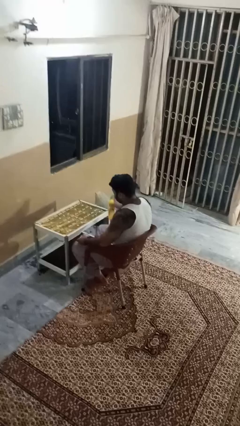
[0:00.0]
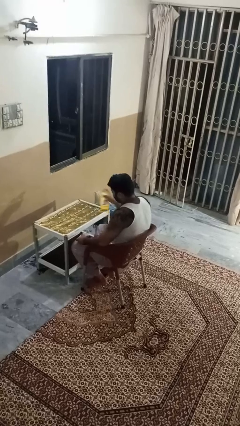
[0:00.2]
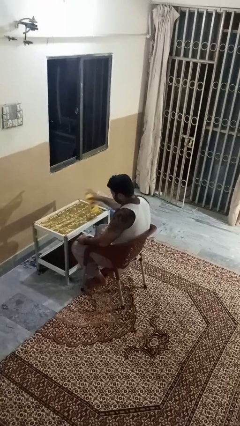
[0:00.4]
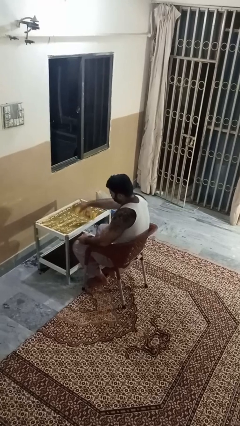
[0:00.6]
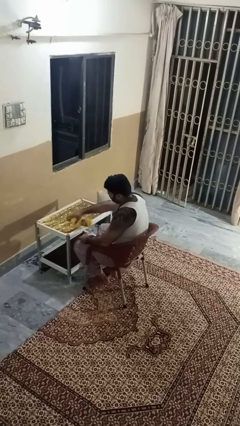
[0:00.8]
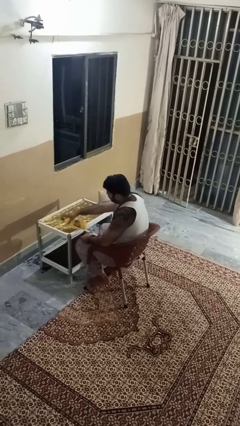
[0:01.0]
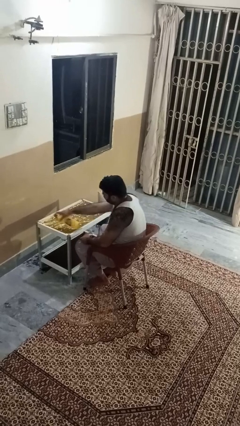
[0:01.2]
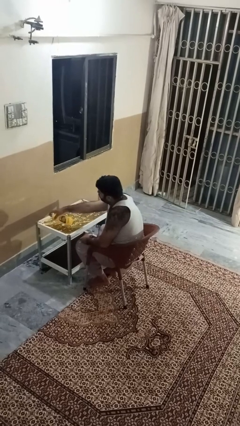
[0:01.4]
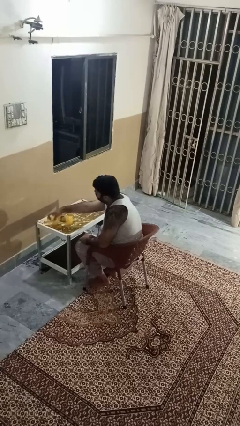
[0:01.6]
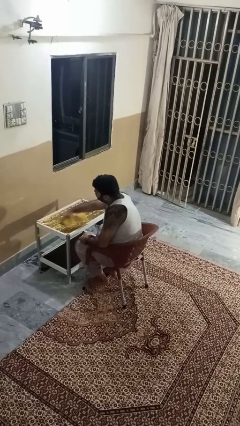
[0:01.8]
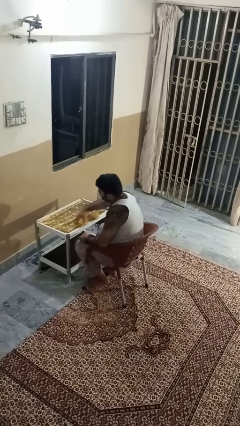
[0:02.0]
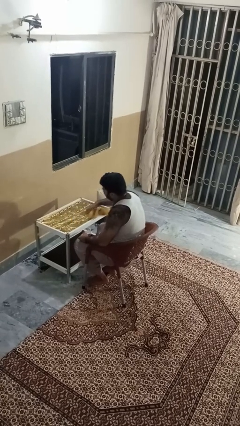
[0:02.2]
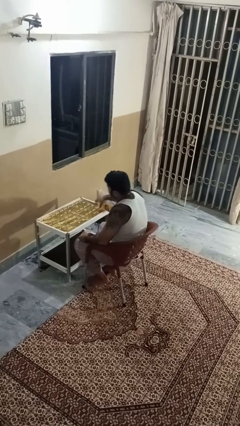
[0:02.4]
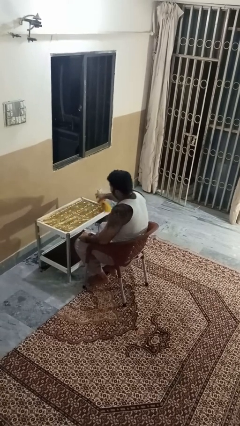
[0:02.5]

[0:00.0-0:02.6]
person sprays from bottle

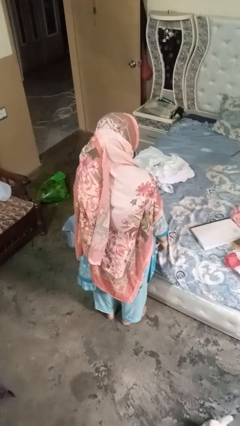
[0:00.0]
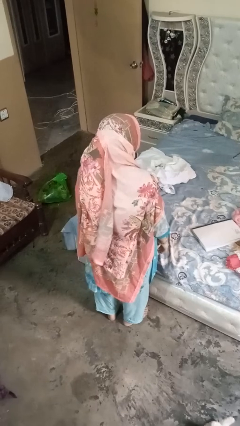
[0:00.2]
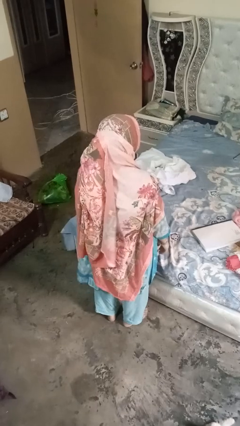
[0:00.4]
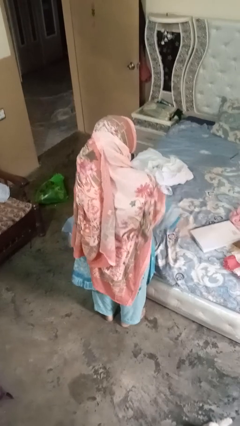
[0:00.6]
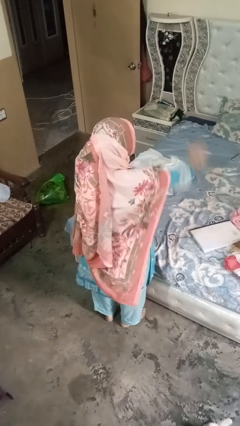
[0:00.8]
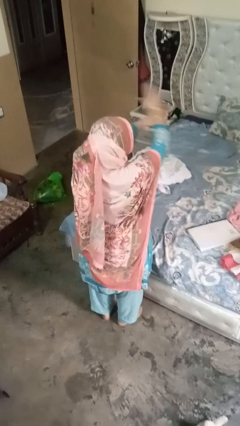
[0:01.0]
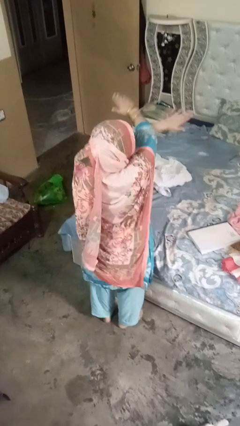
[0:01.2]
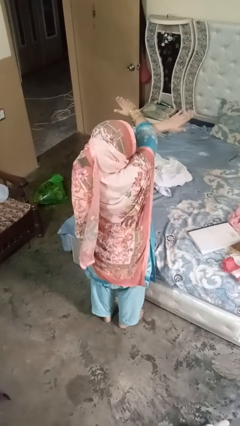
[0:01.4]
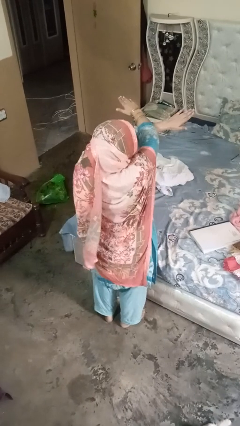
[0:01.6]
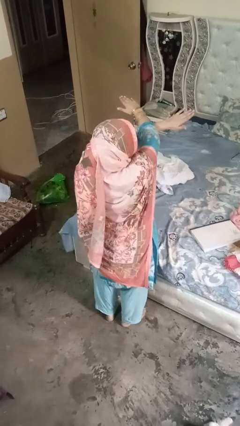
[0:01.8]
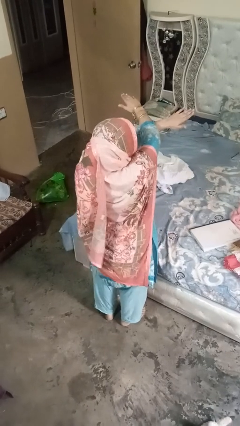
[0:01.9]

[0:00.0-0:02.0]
person gestures arms x

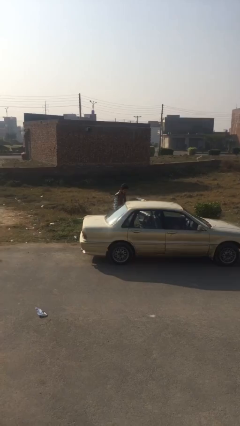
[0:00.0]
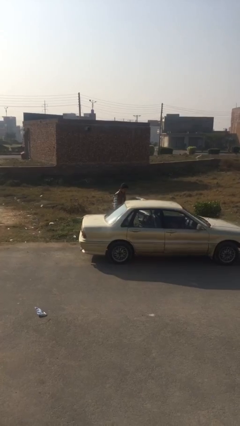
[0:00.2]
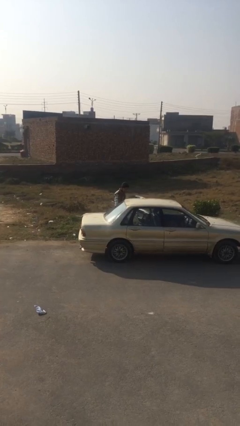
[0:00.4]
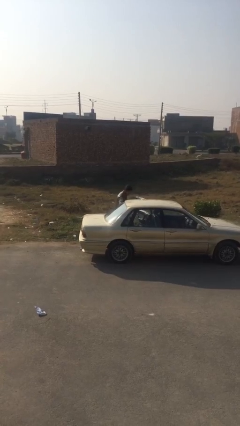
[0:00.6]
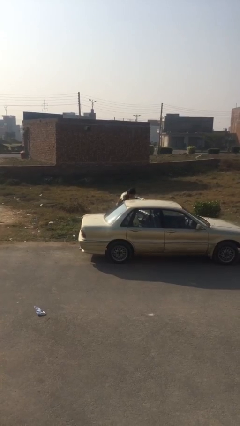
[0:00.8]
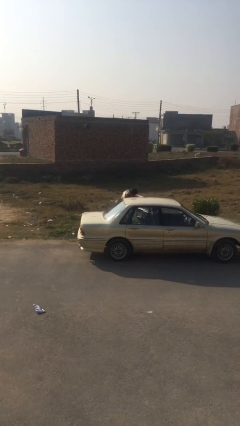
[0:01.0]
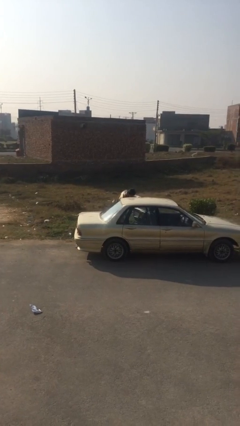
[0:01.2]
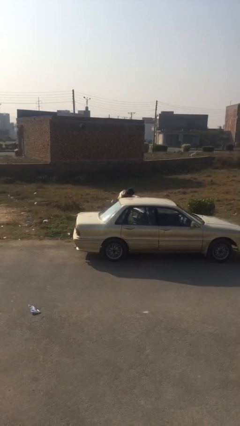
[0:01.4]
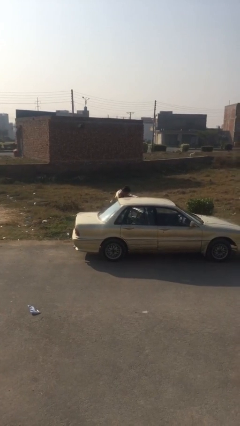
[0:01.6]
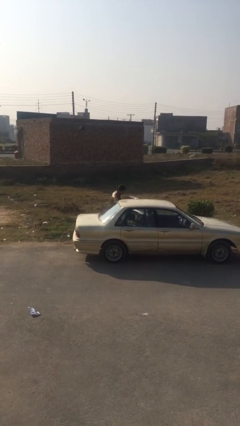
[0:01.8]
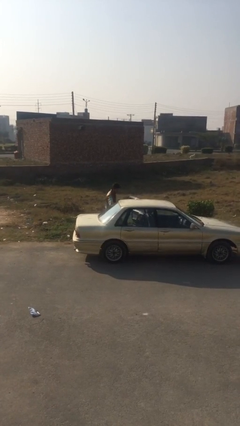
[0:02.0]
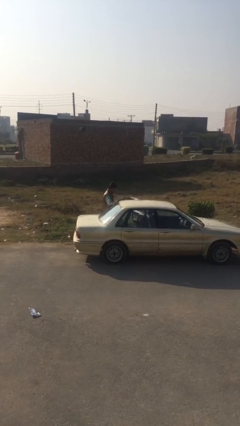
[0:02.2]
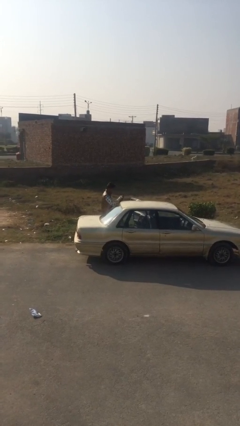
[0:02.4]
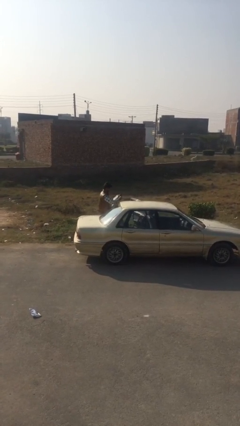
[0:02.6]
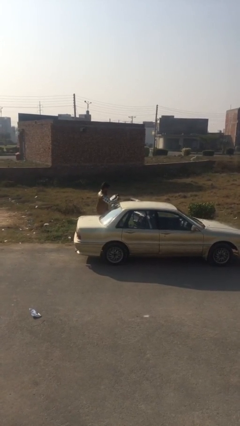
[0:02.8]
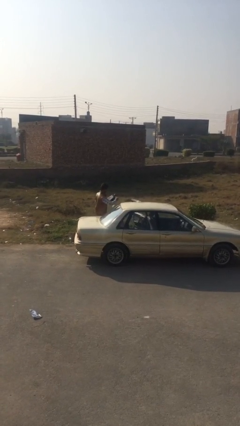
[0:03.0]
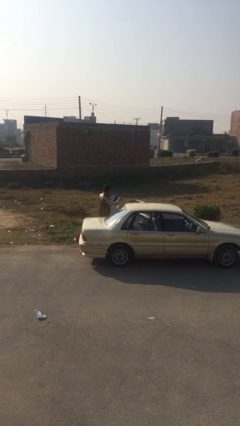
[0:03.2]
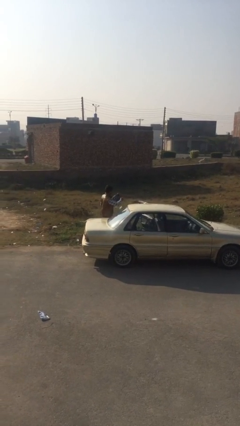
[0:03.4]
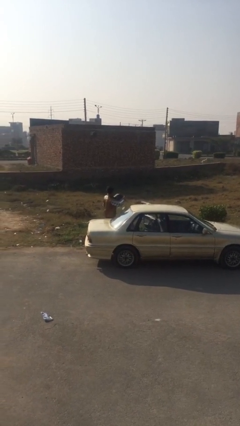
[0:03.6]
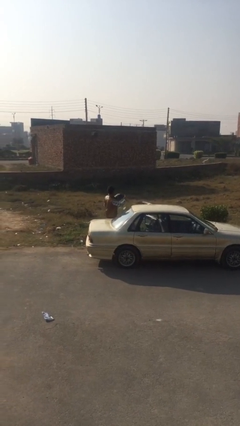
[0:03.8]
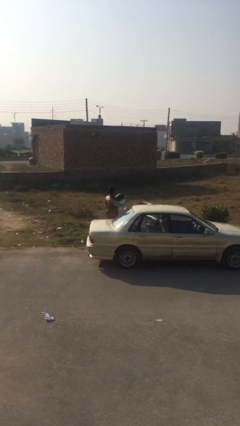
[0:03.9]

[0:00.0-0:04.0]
person unloads car

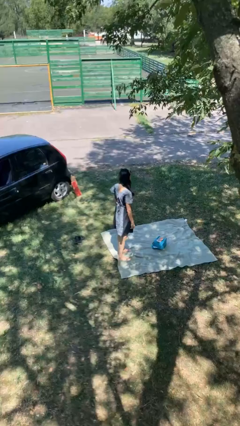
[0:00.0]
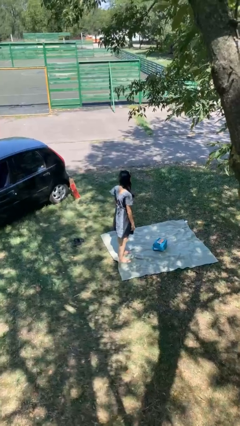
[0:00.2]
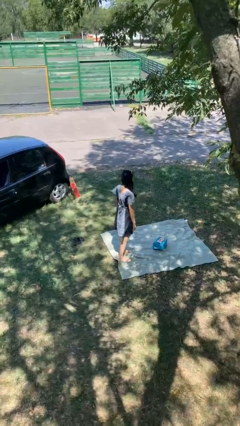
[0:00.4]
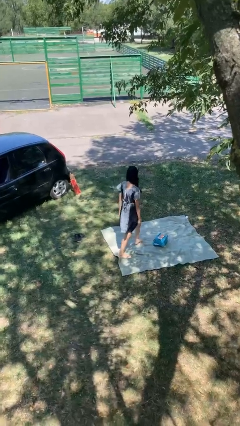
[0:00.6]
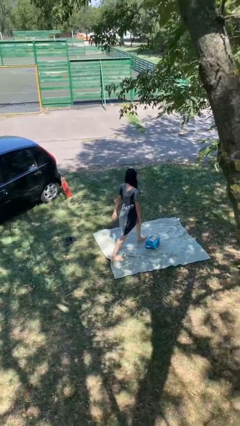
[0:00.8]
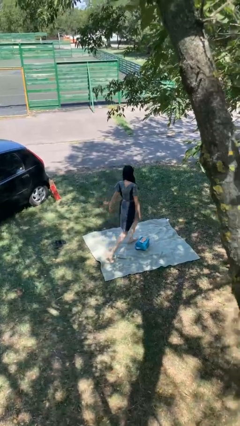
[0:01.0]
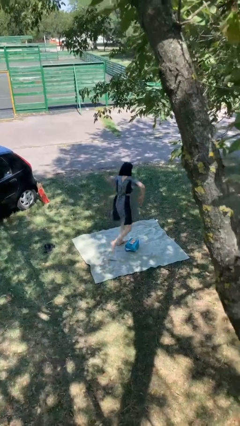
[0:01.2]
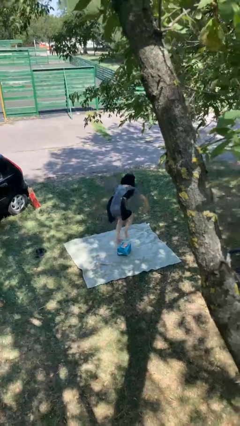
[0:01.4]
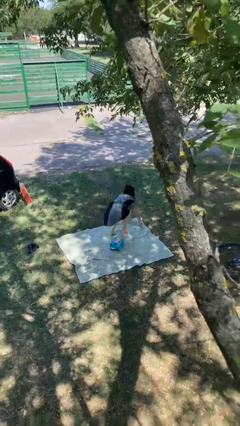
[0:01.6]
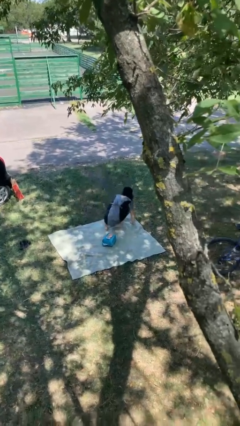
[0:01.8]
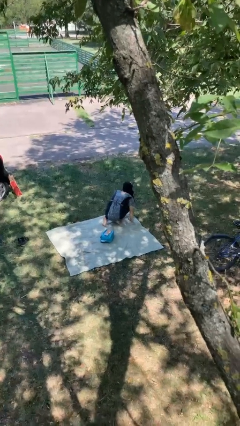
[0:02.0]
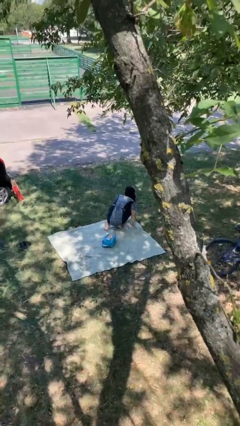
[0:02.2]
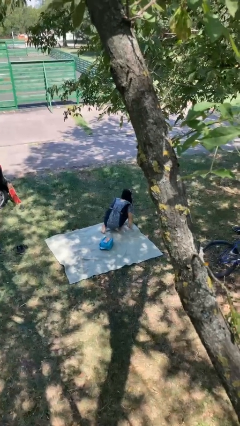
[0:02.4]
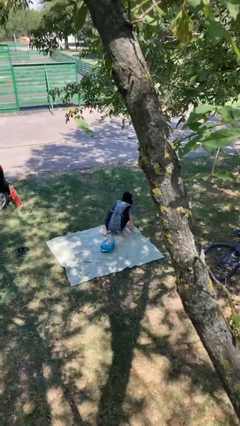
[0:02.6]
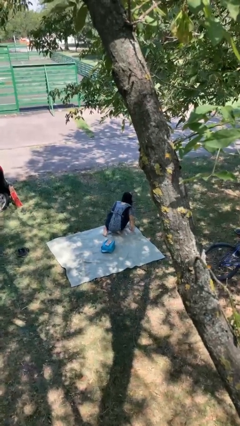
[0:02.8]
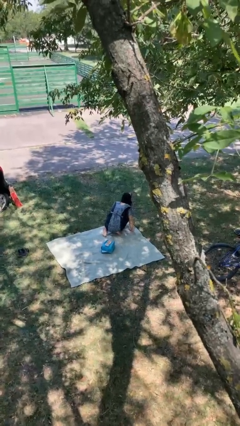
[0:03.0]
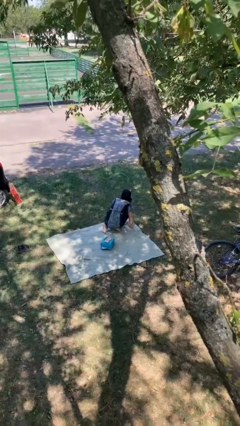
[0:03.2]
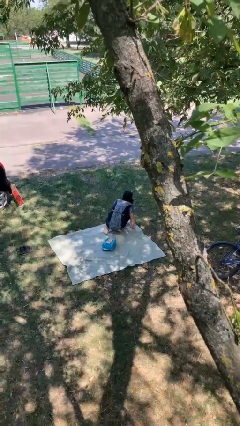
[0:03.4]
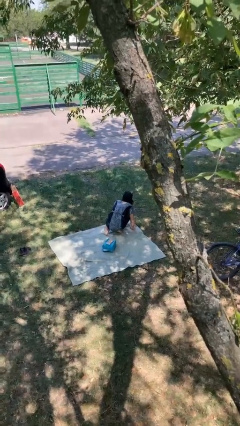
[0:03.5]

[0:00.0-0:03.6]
person trips on object on floor

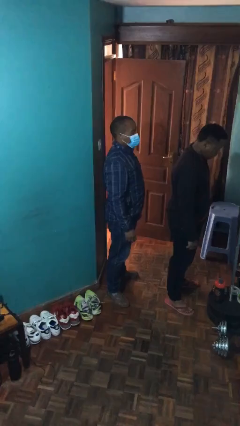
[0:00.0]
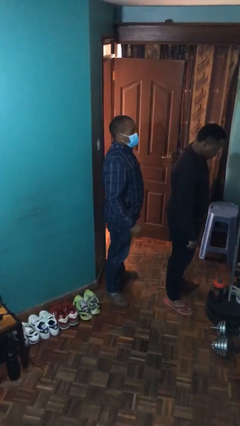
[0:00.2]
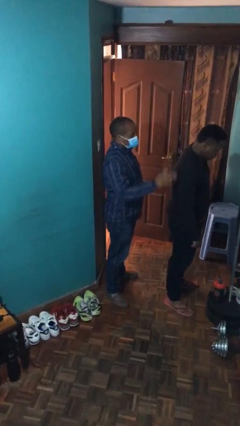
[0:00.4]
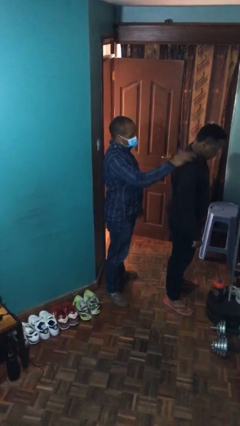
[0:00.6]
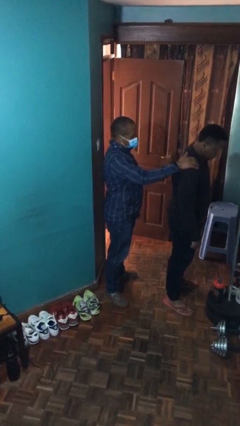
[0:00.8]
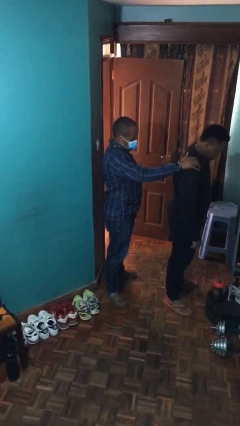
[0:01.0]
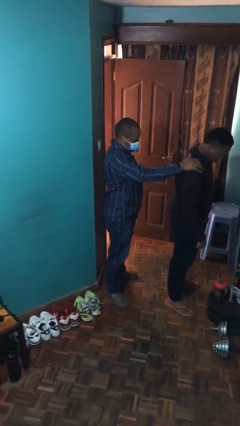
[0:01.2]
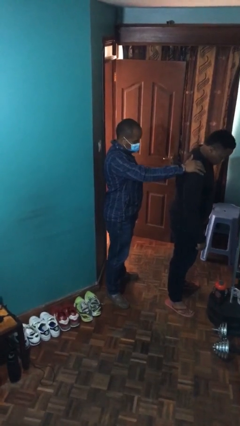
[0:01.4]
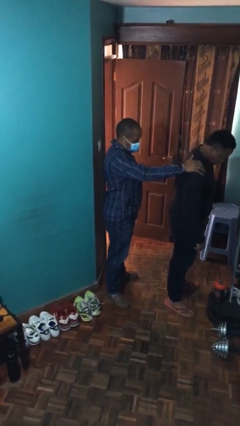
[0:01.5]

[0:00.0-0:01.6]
person grabs person by shoulder

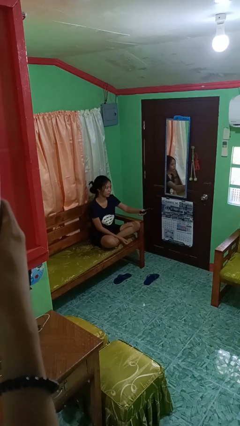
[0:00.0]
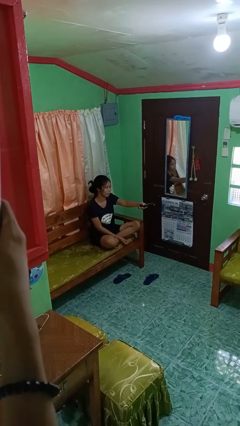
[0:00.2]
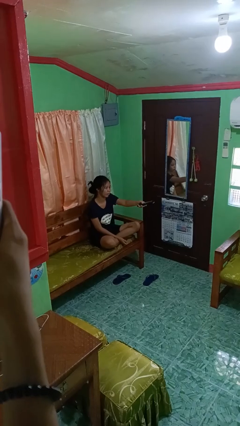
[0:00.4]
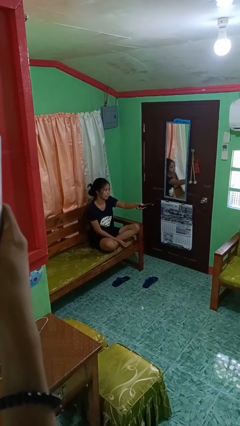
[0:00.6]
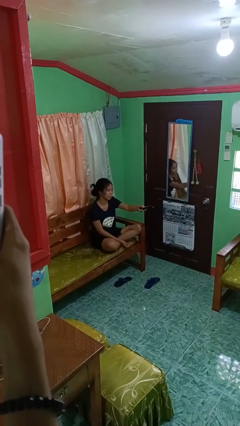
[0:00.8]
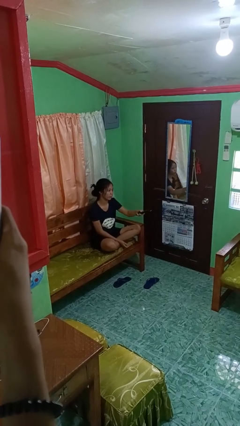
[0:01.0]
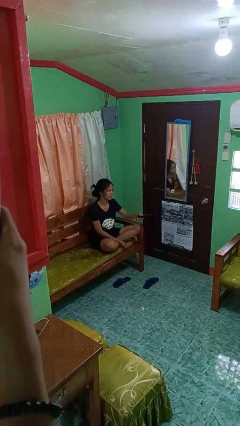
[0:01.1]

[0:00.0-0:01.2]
person uses television remote

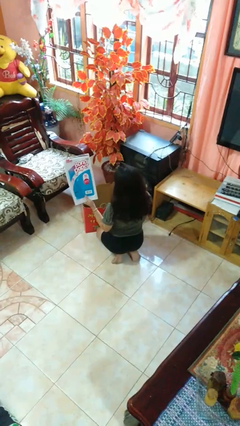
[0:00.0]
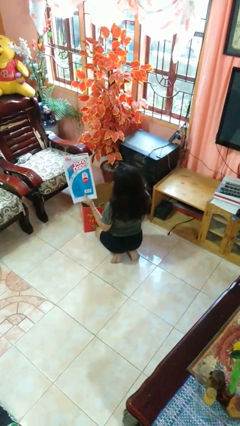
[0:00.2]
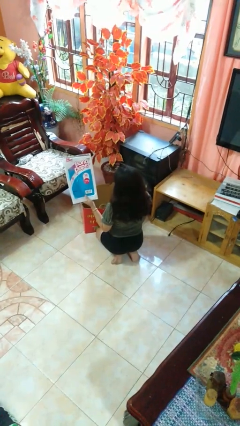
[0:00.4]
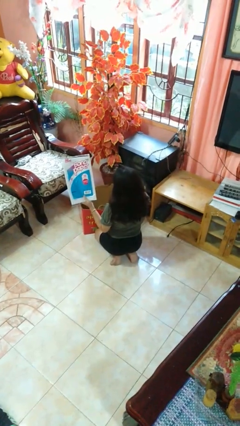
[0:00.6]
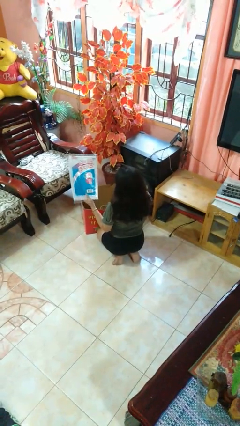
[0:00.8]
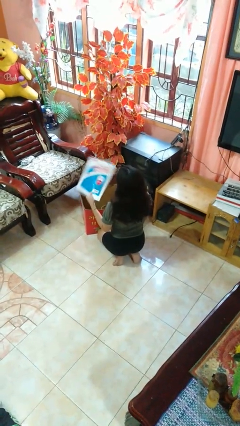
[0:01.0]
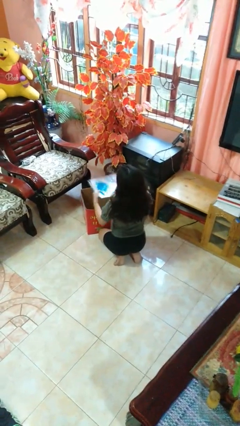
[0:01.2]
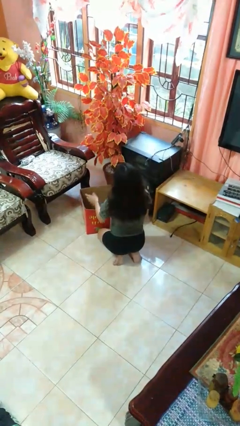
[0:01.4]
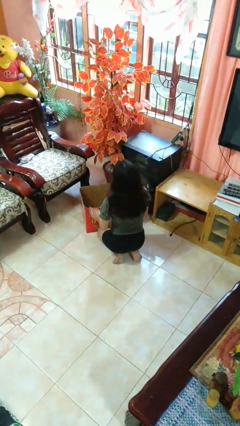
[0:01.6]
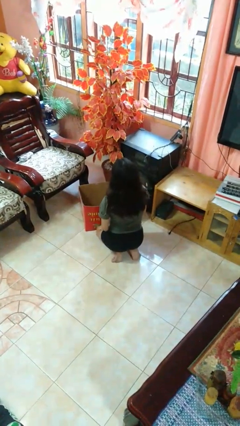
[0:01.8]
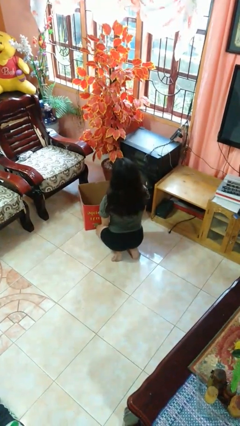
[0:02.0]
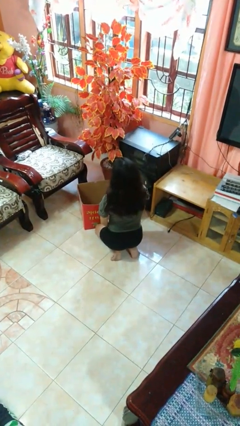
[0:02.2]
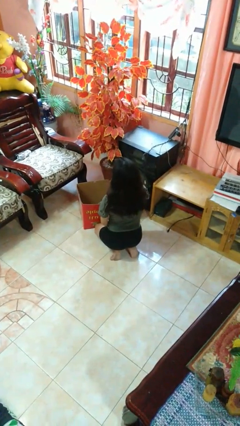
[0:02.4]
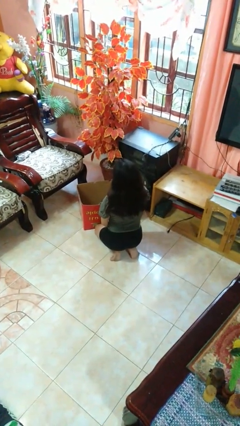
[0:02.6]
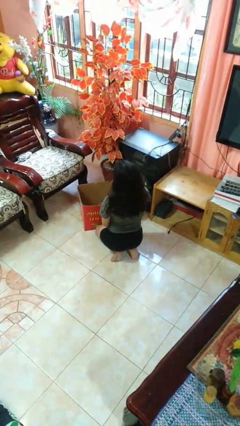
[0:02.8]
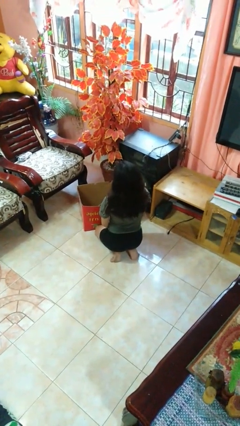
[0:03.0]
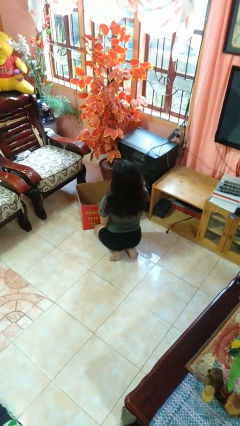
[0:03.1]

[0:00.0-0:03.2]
person puts object into box
